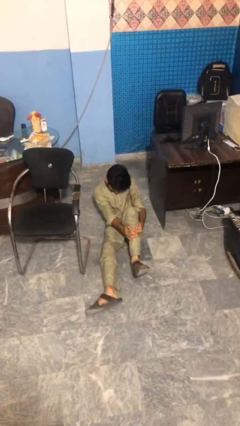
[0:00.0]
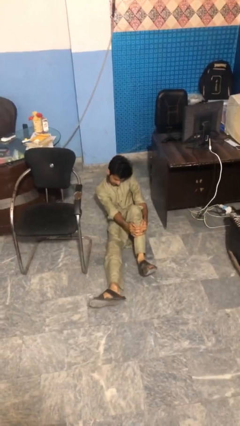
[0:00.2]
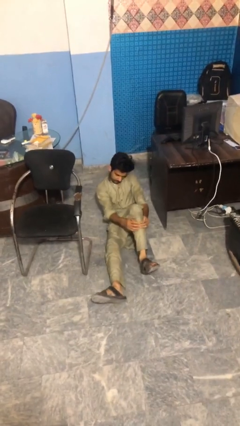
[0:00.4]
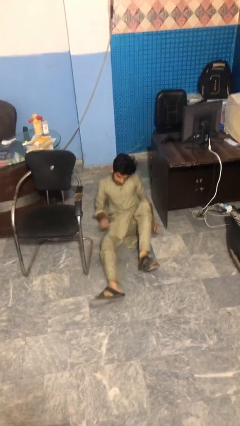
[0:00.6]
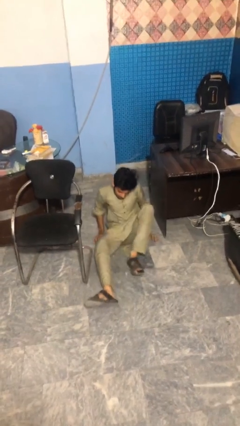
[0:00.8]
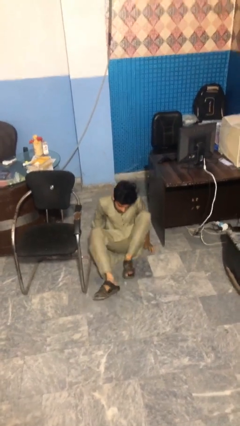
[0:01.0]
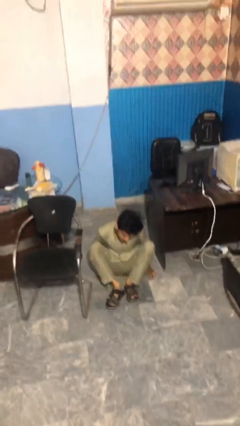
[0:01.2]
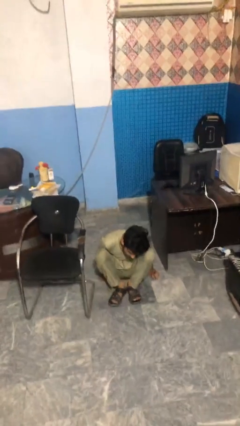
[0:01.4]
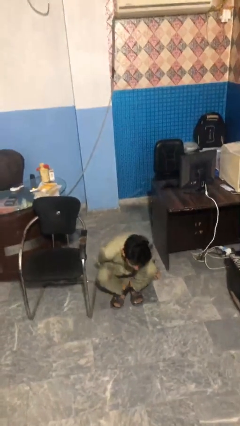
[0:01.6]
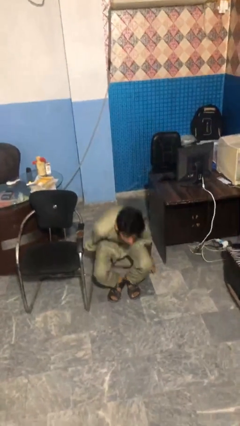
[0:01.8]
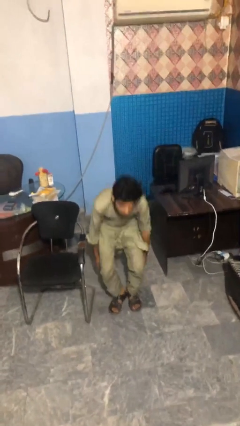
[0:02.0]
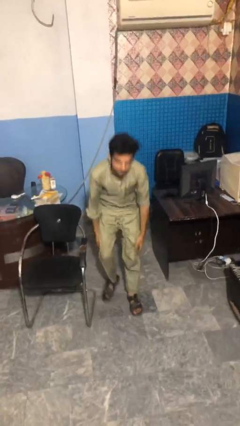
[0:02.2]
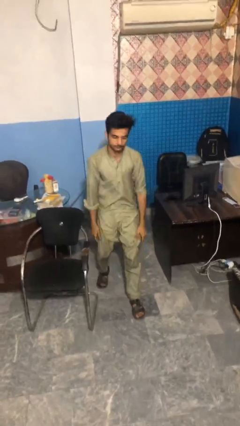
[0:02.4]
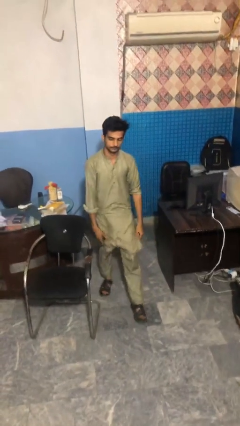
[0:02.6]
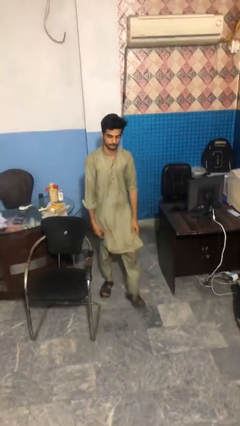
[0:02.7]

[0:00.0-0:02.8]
person stands up from floor

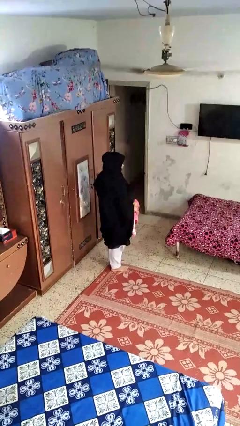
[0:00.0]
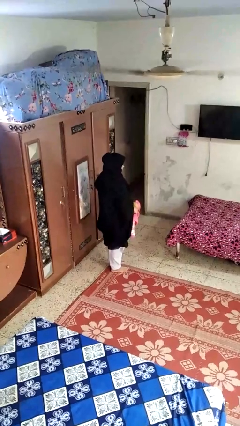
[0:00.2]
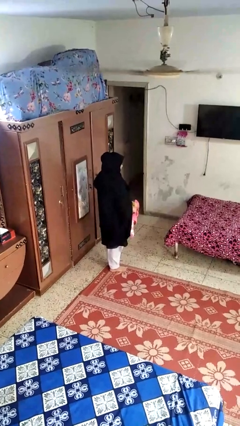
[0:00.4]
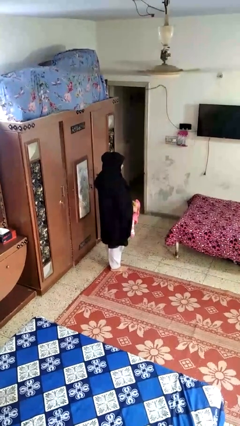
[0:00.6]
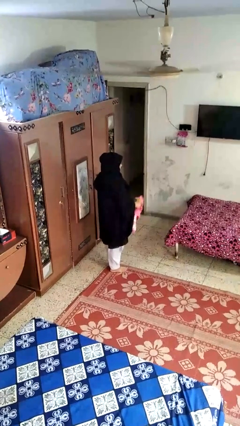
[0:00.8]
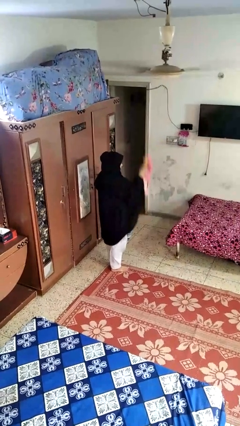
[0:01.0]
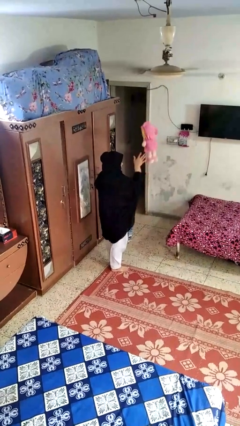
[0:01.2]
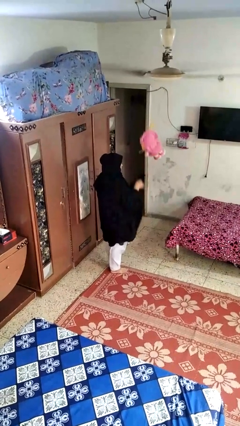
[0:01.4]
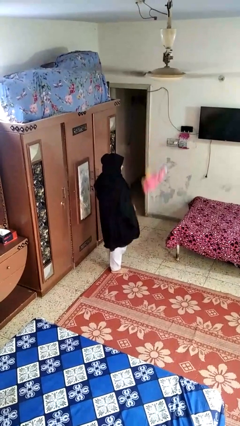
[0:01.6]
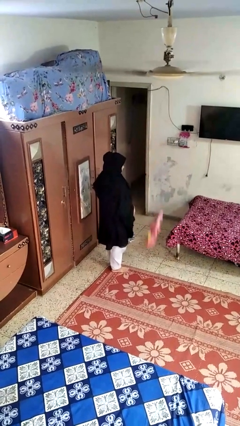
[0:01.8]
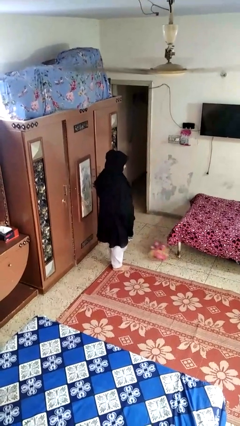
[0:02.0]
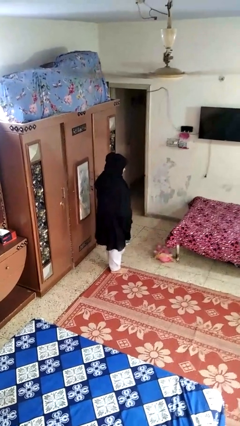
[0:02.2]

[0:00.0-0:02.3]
person throws object into air

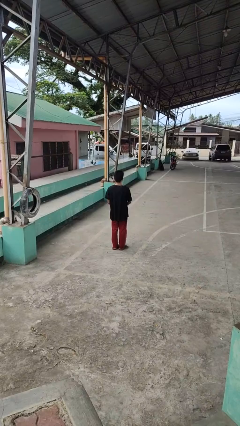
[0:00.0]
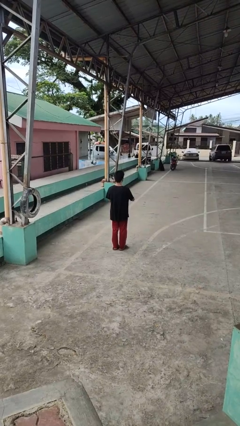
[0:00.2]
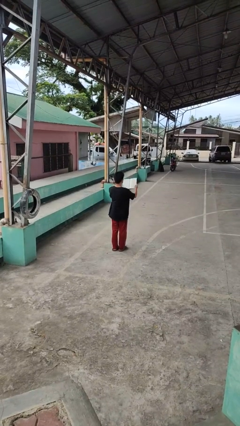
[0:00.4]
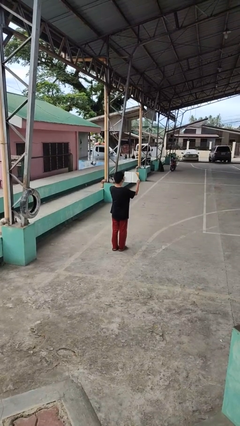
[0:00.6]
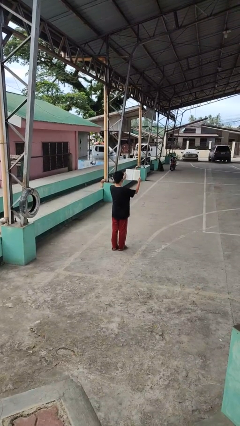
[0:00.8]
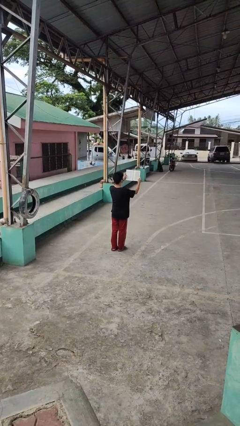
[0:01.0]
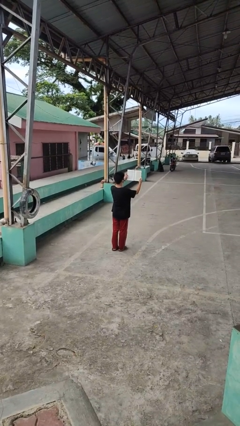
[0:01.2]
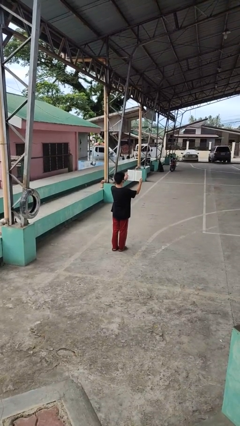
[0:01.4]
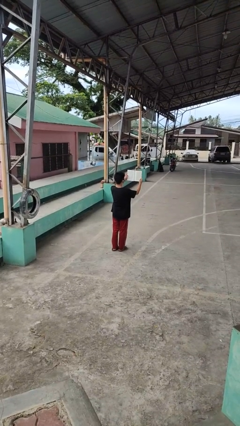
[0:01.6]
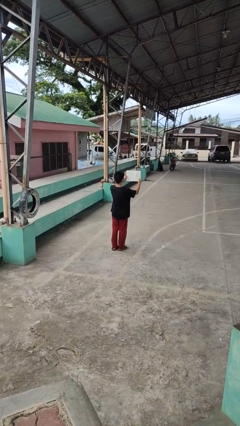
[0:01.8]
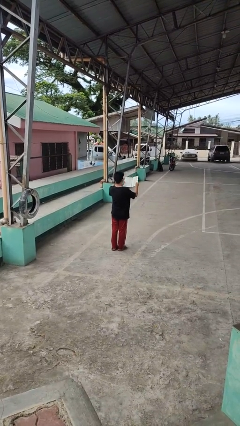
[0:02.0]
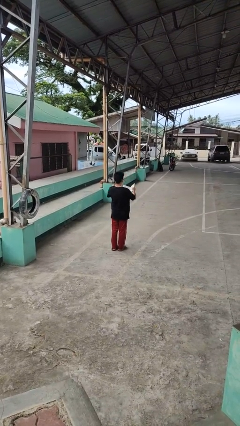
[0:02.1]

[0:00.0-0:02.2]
person reads book

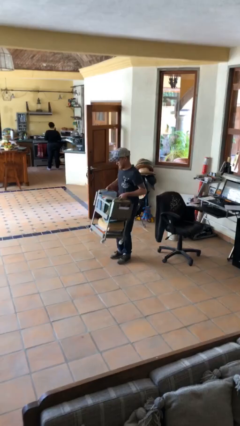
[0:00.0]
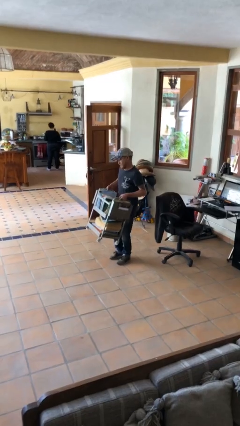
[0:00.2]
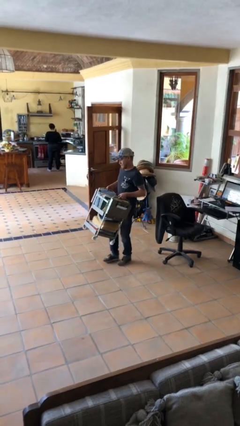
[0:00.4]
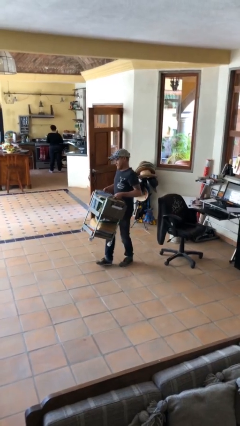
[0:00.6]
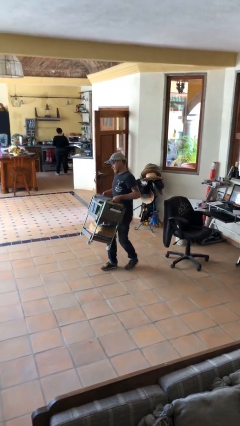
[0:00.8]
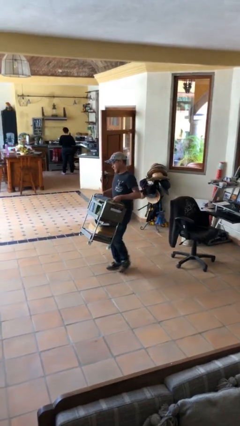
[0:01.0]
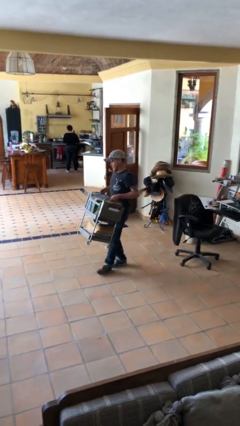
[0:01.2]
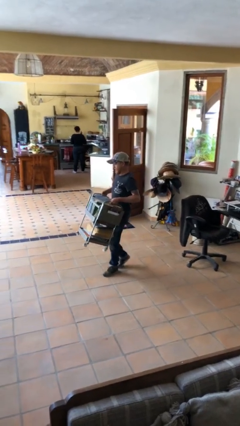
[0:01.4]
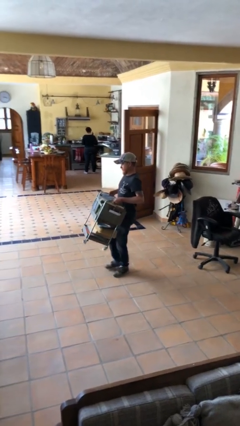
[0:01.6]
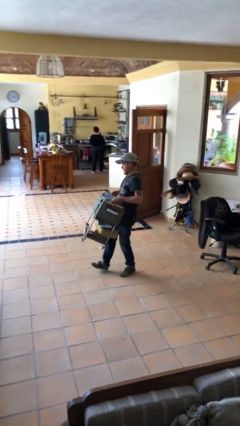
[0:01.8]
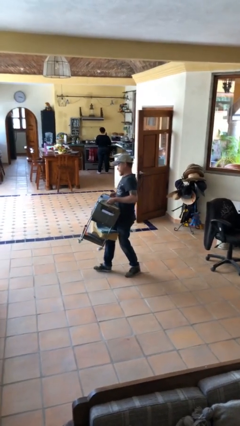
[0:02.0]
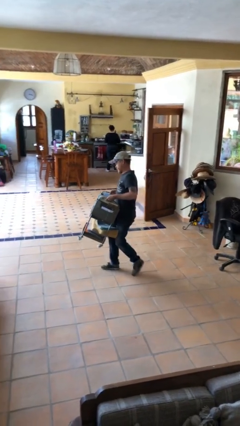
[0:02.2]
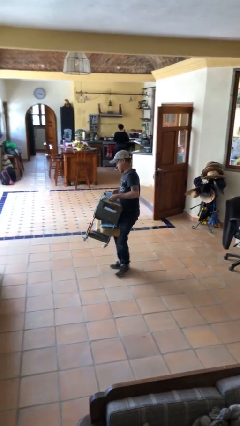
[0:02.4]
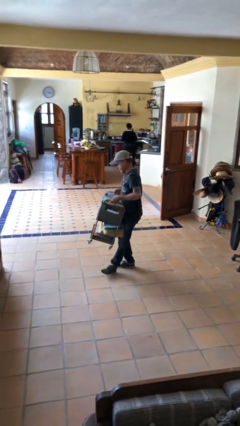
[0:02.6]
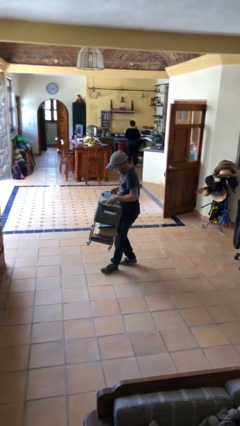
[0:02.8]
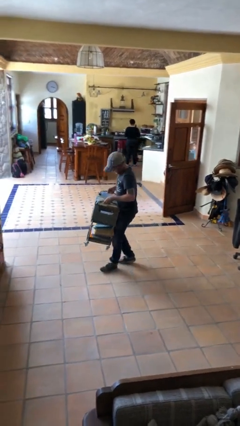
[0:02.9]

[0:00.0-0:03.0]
person carries heavy object

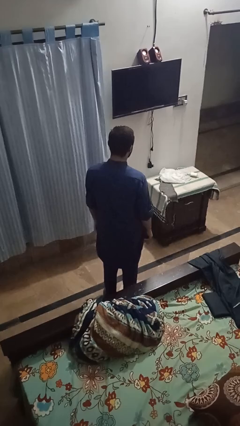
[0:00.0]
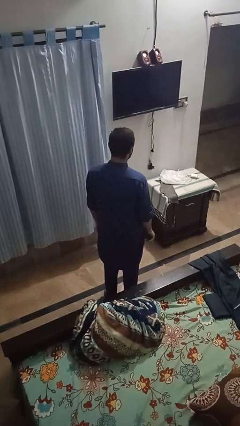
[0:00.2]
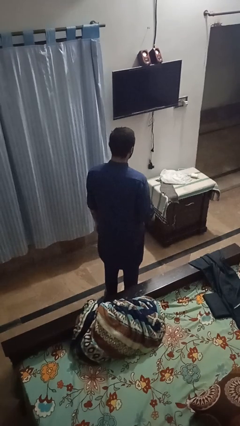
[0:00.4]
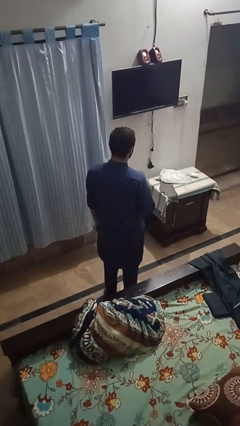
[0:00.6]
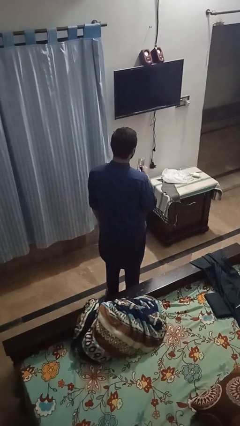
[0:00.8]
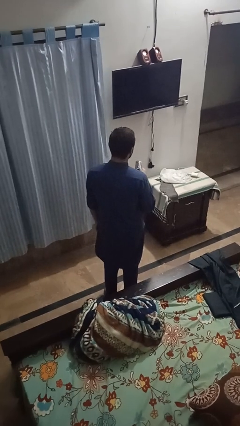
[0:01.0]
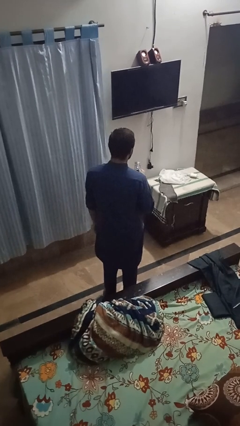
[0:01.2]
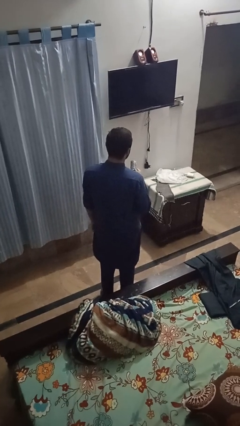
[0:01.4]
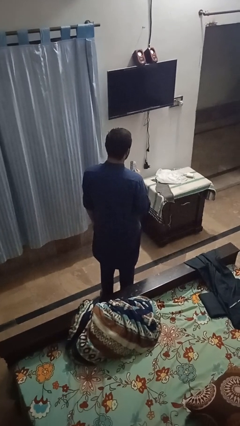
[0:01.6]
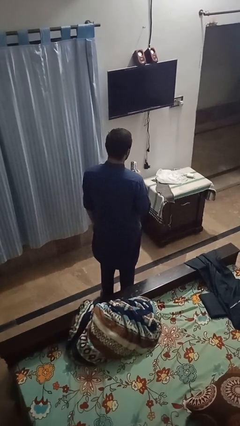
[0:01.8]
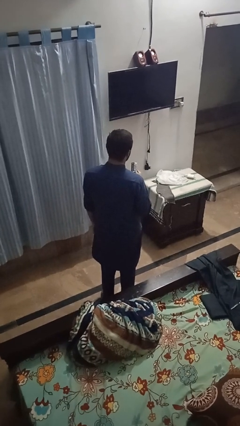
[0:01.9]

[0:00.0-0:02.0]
person uses television remote

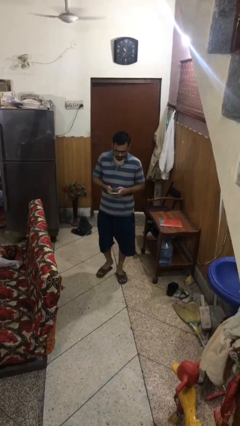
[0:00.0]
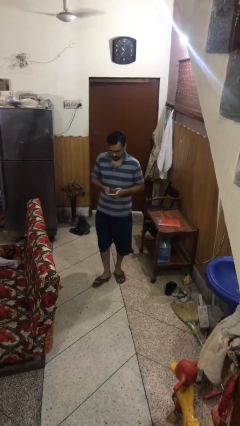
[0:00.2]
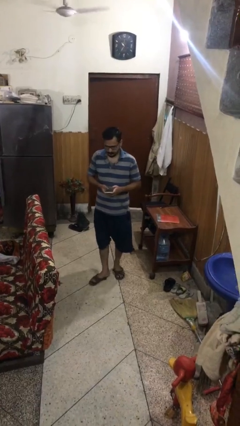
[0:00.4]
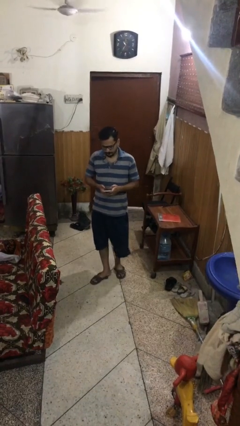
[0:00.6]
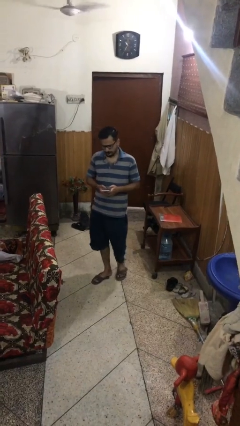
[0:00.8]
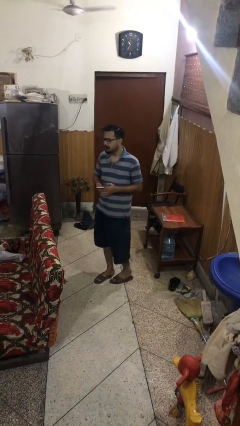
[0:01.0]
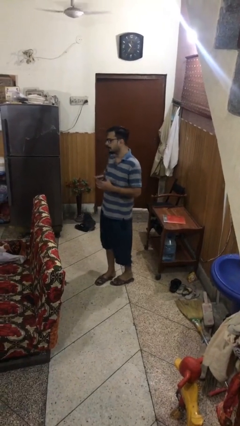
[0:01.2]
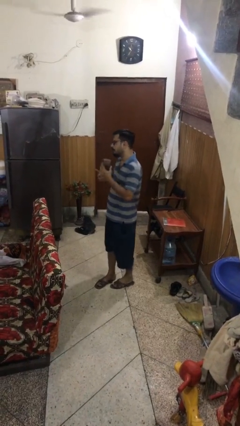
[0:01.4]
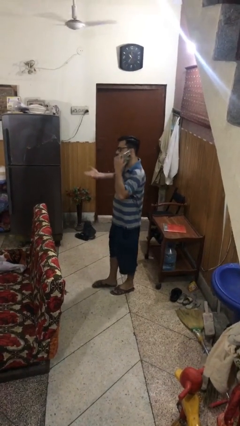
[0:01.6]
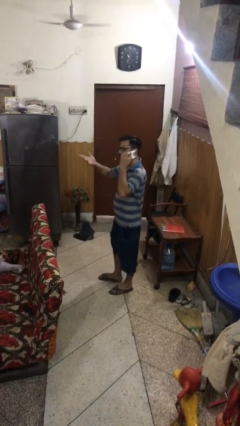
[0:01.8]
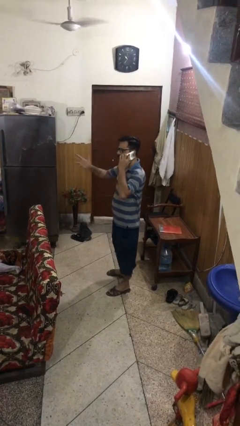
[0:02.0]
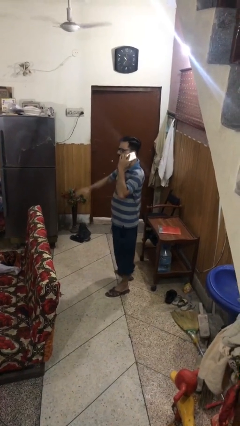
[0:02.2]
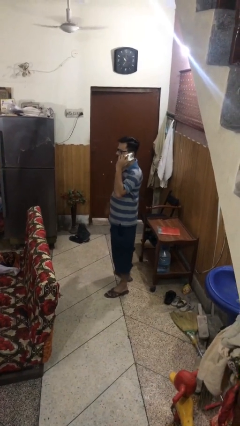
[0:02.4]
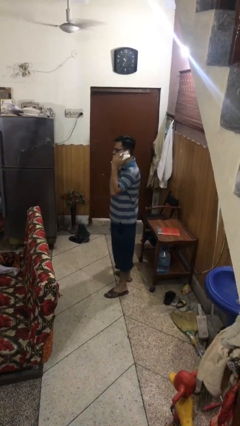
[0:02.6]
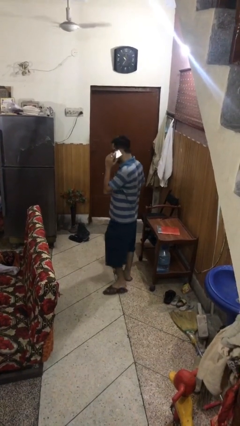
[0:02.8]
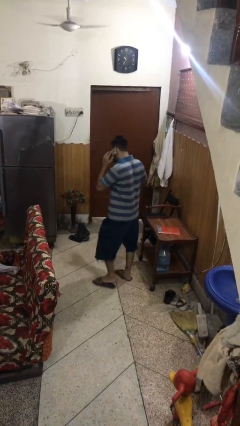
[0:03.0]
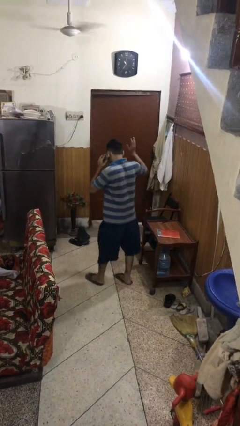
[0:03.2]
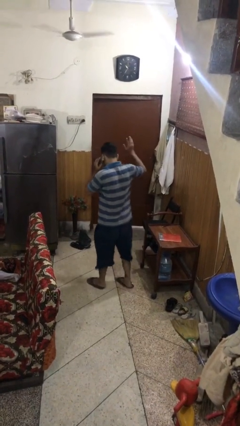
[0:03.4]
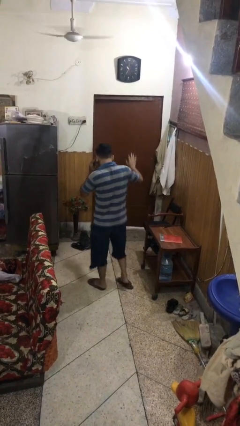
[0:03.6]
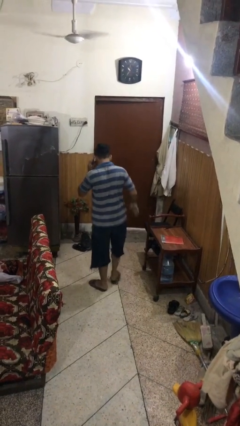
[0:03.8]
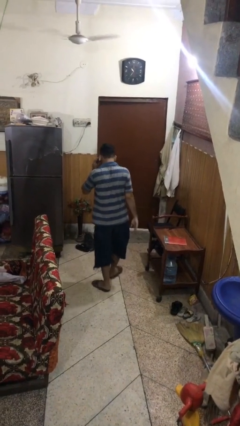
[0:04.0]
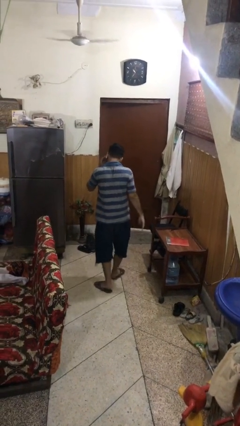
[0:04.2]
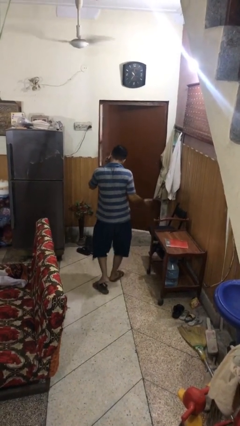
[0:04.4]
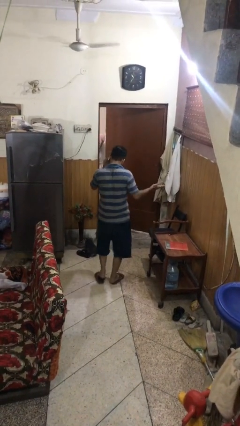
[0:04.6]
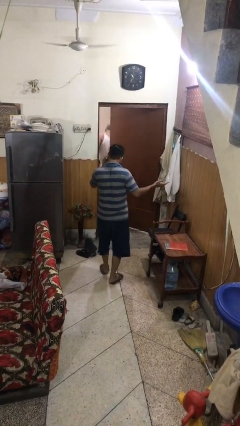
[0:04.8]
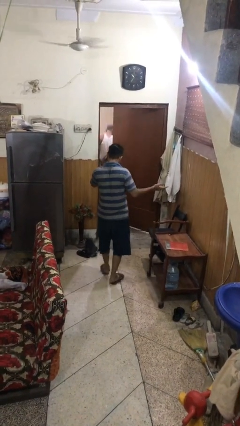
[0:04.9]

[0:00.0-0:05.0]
person talks on phone

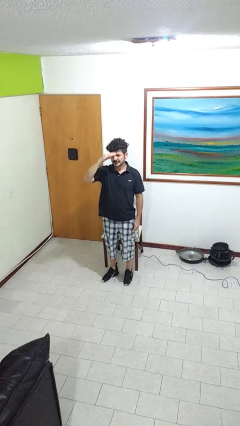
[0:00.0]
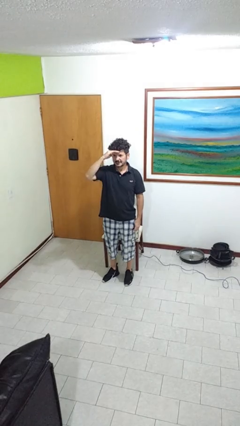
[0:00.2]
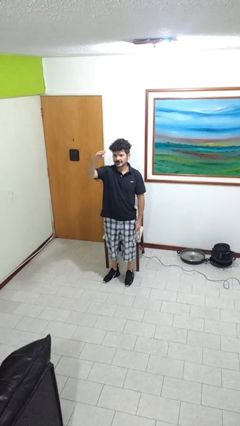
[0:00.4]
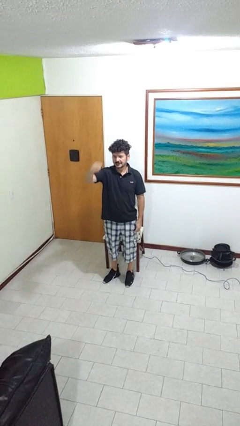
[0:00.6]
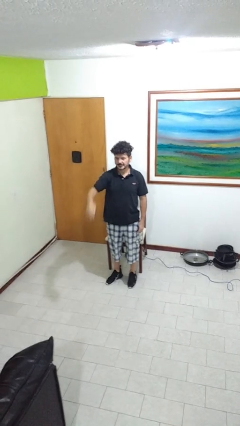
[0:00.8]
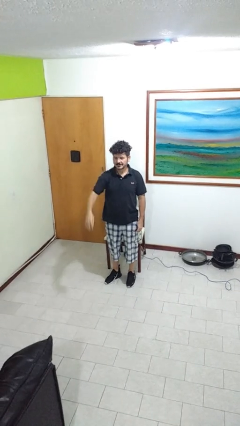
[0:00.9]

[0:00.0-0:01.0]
person salutes
